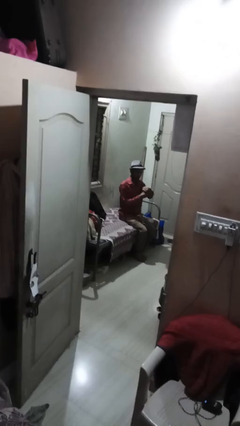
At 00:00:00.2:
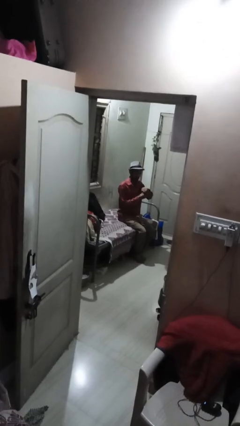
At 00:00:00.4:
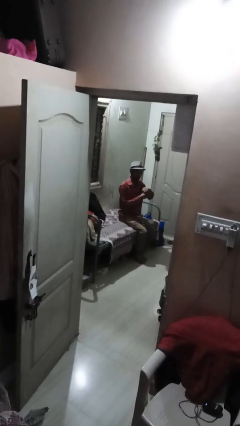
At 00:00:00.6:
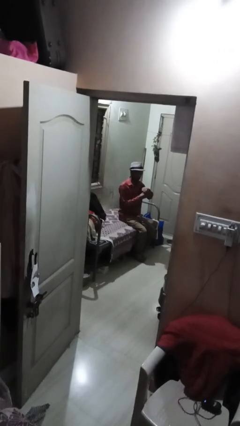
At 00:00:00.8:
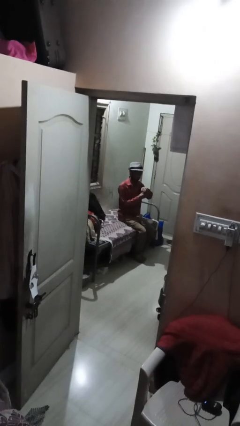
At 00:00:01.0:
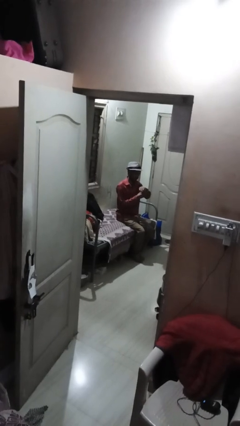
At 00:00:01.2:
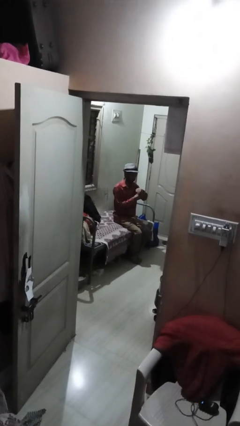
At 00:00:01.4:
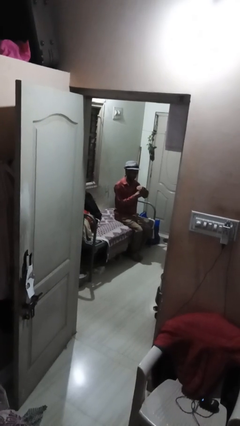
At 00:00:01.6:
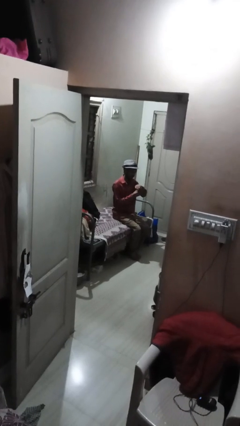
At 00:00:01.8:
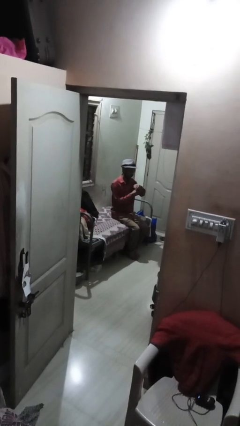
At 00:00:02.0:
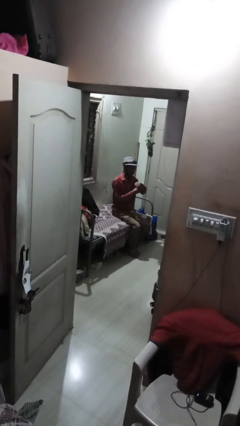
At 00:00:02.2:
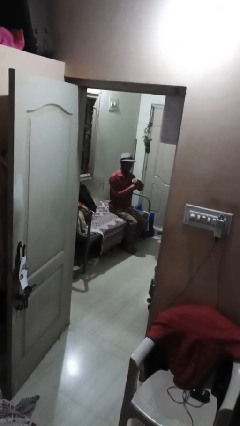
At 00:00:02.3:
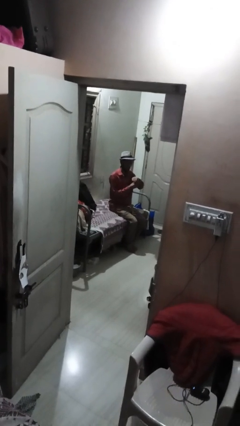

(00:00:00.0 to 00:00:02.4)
person looks at wristwatch

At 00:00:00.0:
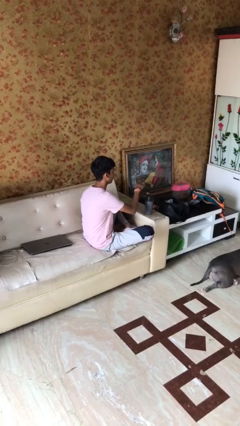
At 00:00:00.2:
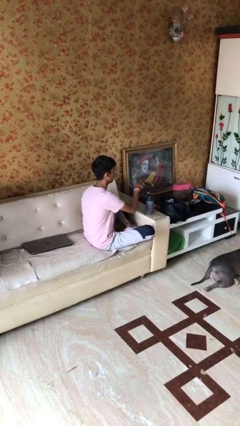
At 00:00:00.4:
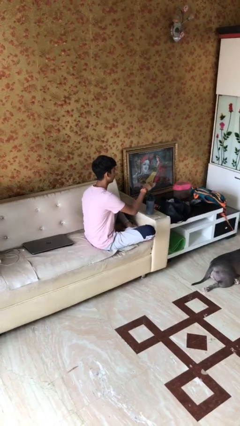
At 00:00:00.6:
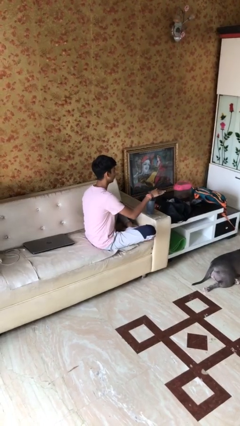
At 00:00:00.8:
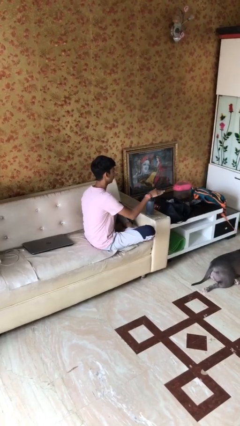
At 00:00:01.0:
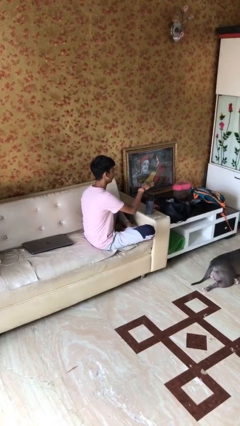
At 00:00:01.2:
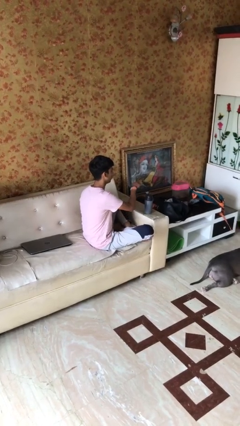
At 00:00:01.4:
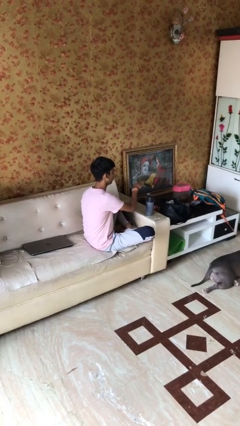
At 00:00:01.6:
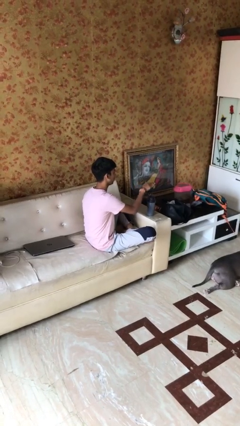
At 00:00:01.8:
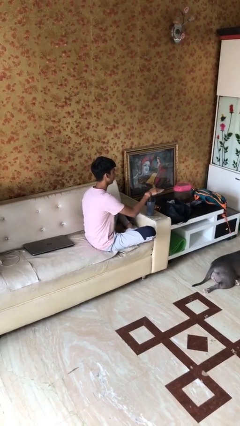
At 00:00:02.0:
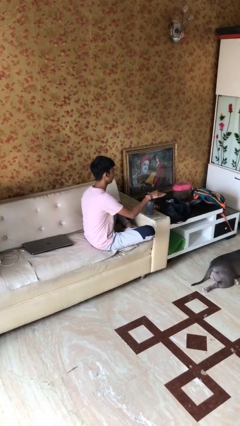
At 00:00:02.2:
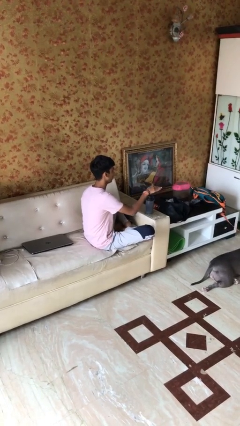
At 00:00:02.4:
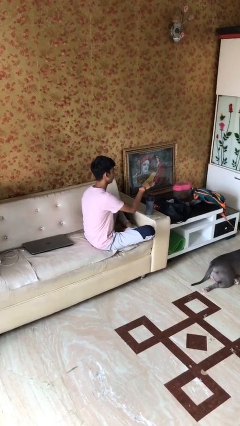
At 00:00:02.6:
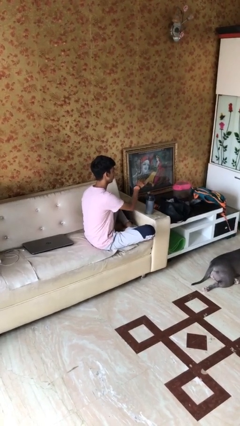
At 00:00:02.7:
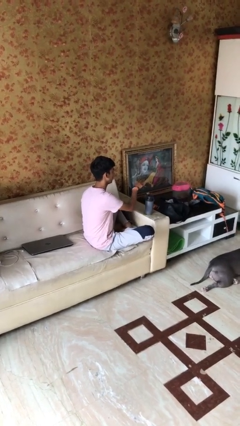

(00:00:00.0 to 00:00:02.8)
person waves hand over object

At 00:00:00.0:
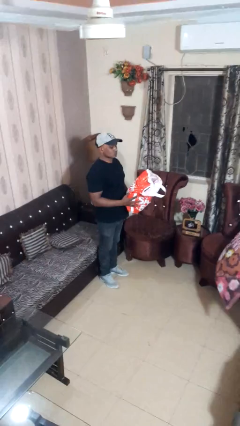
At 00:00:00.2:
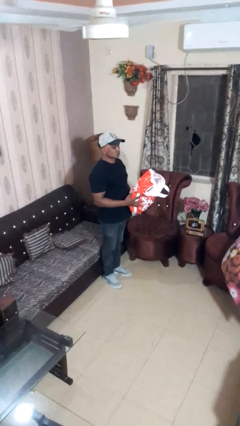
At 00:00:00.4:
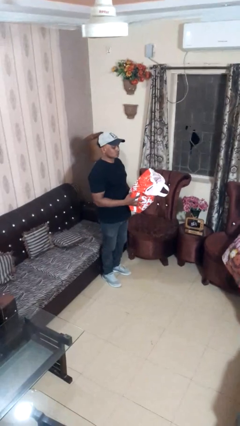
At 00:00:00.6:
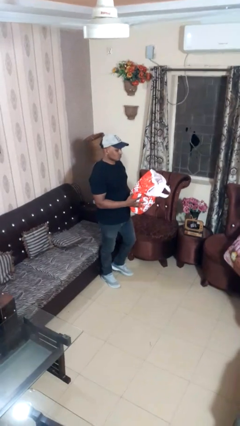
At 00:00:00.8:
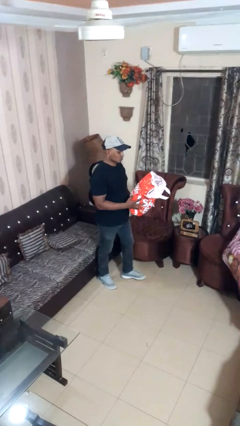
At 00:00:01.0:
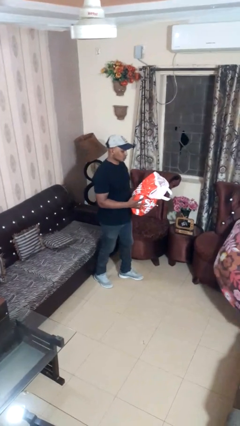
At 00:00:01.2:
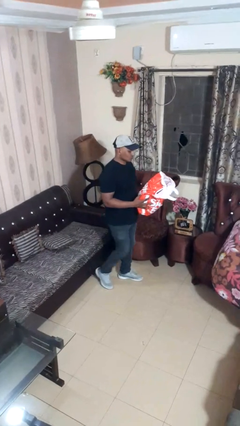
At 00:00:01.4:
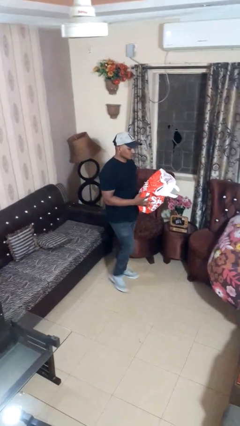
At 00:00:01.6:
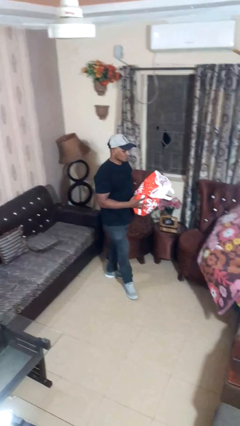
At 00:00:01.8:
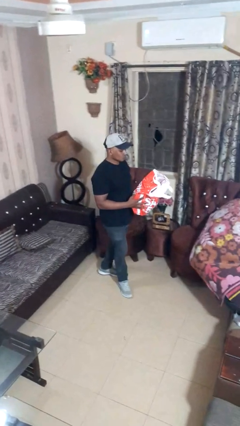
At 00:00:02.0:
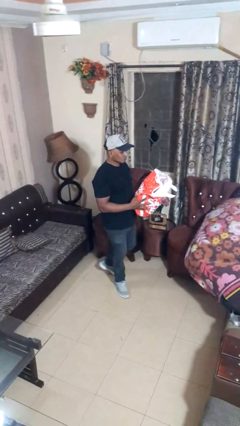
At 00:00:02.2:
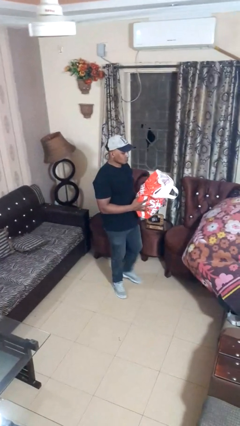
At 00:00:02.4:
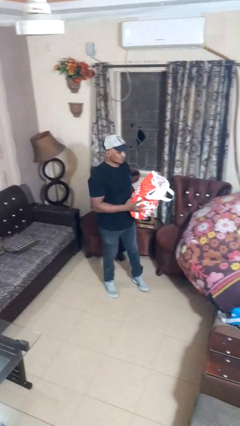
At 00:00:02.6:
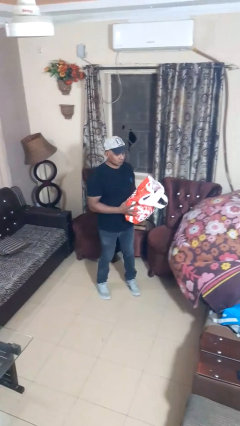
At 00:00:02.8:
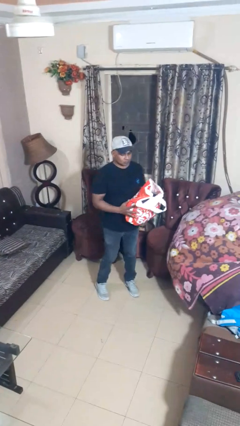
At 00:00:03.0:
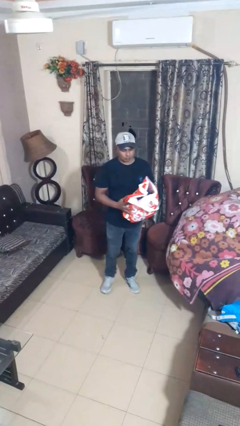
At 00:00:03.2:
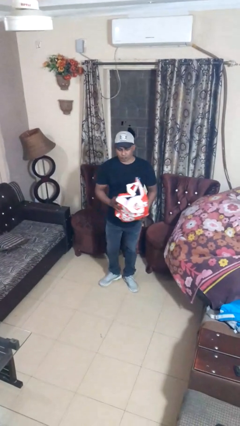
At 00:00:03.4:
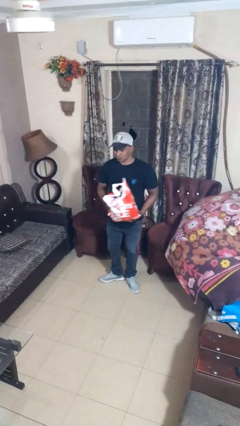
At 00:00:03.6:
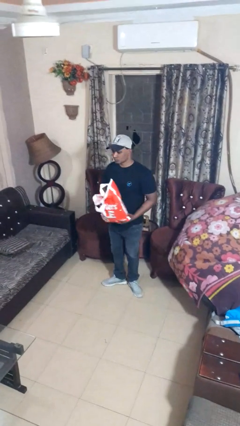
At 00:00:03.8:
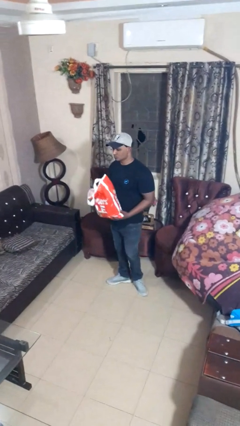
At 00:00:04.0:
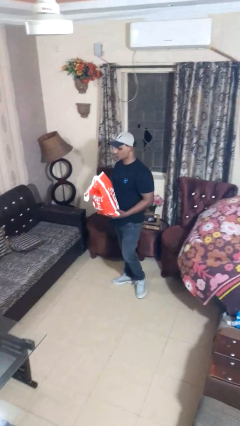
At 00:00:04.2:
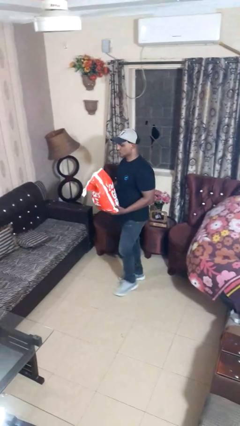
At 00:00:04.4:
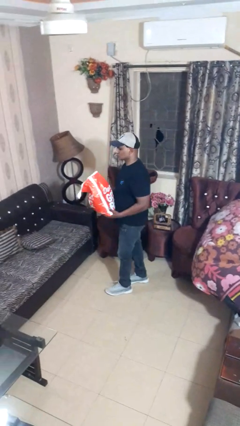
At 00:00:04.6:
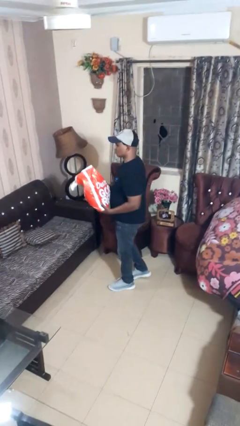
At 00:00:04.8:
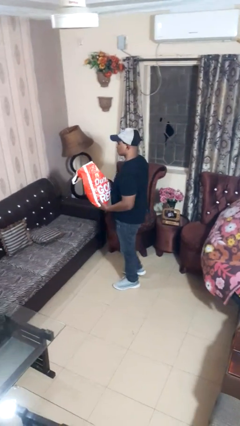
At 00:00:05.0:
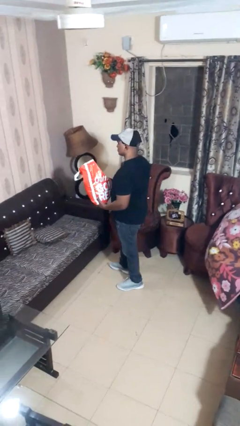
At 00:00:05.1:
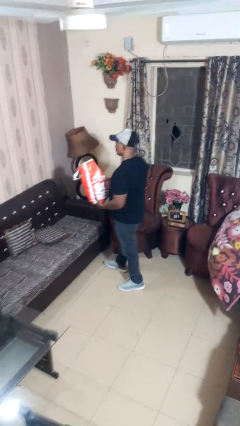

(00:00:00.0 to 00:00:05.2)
person carries groceries

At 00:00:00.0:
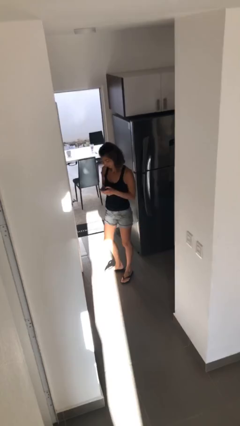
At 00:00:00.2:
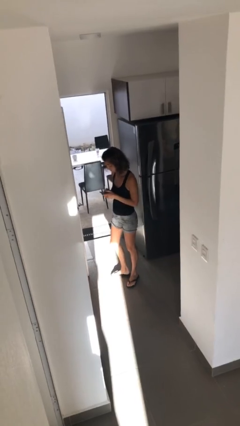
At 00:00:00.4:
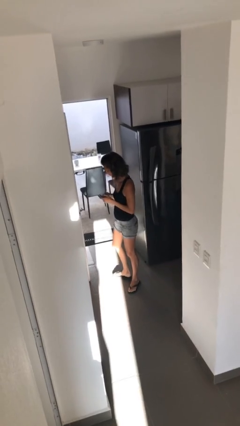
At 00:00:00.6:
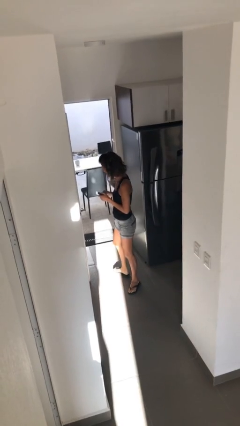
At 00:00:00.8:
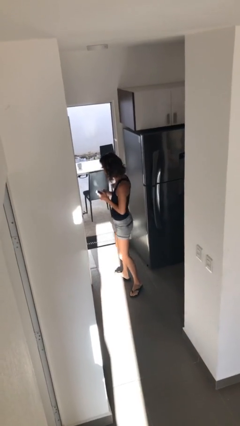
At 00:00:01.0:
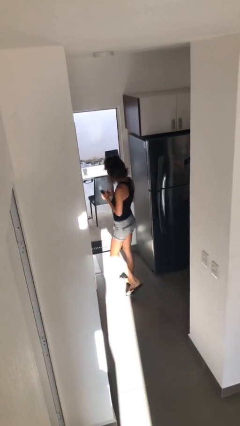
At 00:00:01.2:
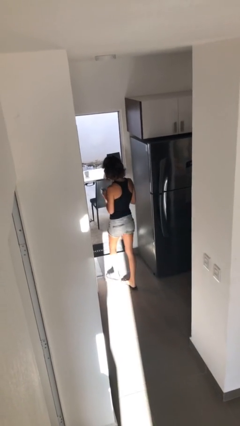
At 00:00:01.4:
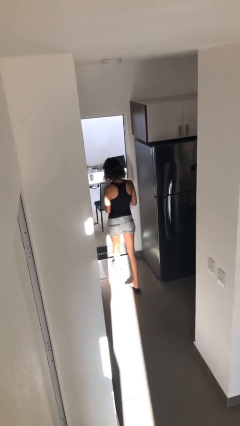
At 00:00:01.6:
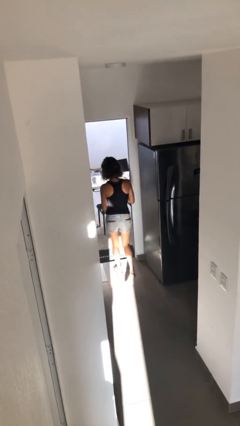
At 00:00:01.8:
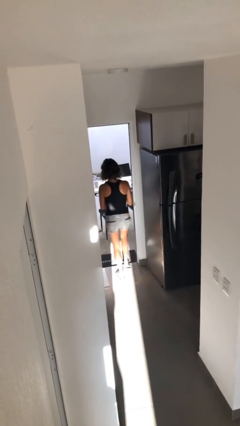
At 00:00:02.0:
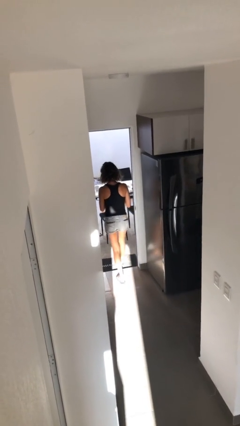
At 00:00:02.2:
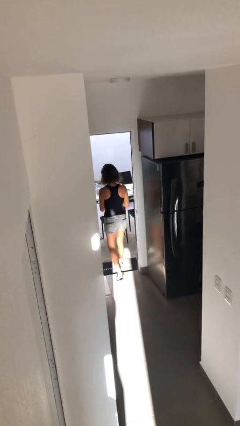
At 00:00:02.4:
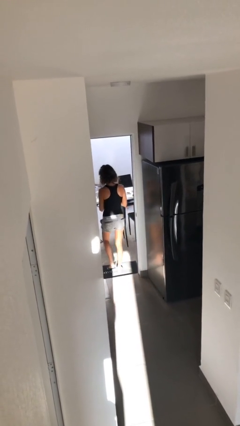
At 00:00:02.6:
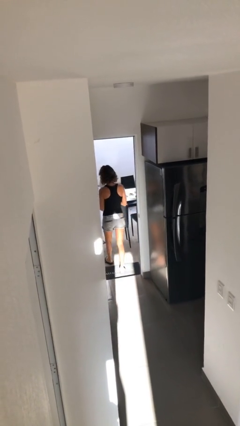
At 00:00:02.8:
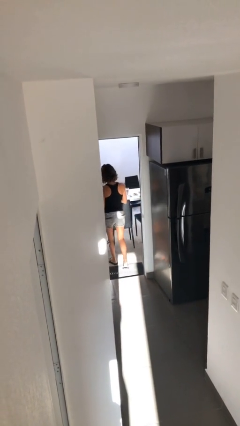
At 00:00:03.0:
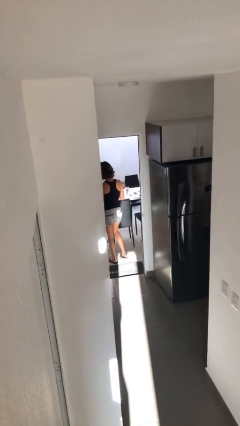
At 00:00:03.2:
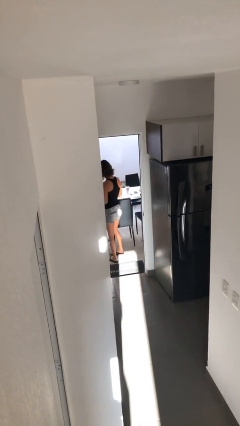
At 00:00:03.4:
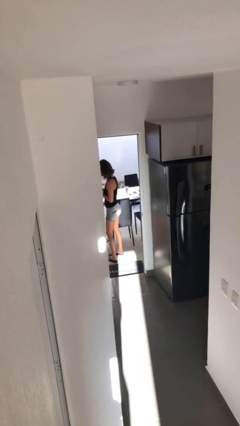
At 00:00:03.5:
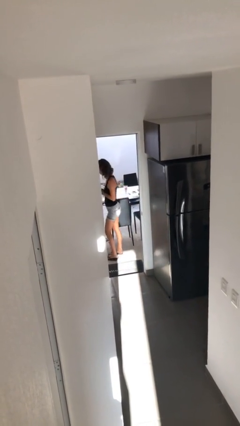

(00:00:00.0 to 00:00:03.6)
person exits scene through structure

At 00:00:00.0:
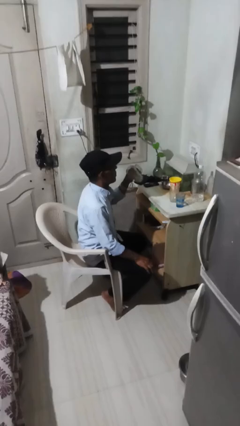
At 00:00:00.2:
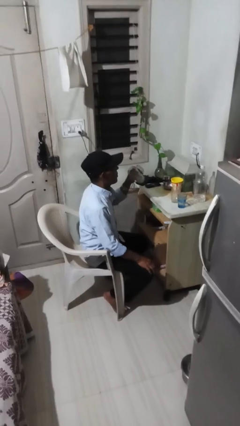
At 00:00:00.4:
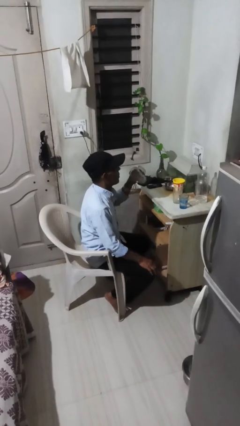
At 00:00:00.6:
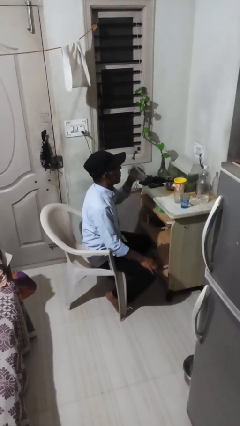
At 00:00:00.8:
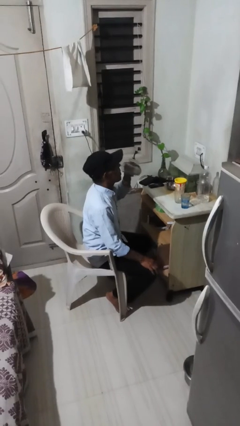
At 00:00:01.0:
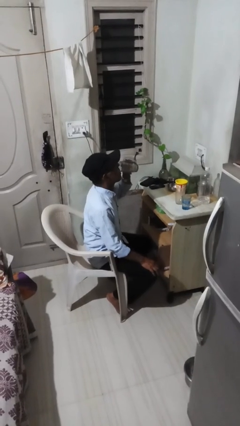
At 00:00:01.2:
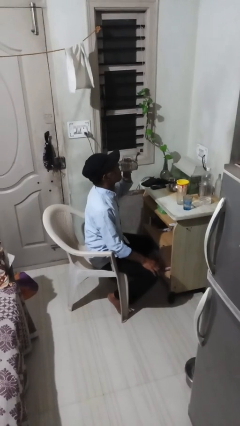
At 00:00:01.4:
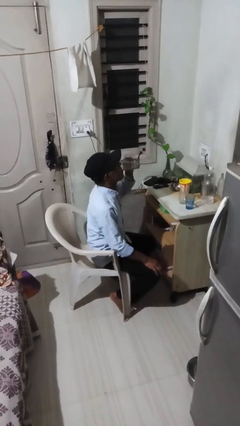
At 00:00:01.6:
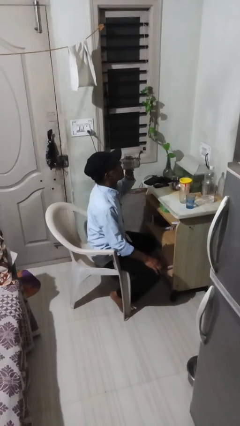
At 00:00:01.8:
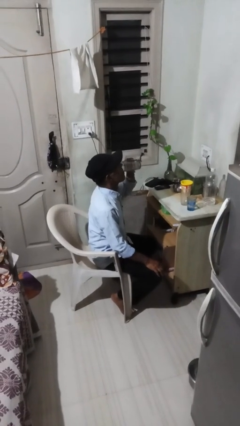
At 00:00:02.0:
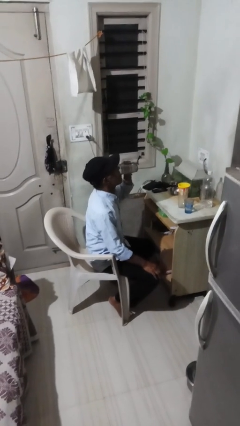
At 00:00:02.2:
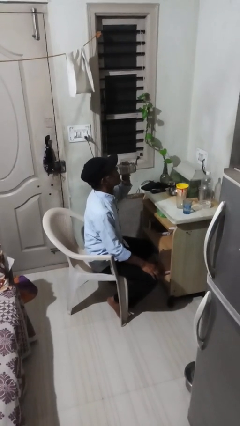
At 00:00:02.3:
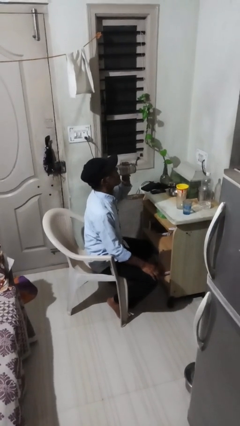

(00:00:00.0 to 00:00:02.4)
person drinks from shotglass

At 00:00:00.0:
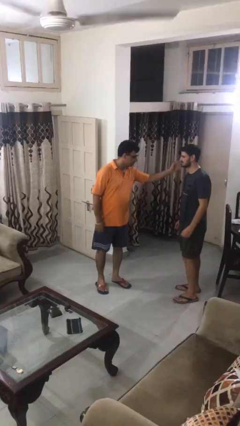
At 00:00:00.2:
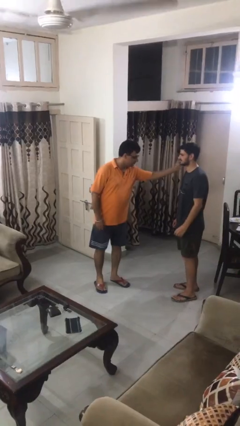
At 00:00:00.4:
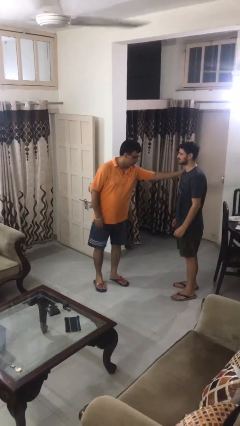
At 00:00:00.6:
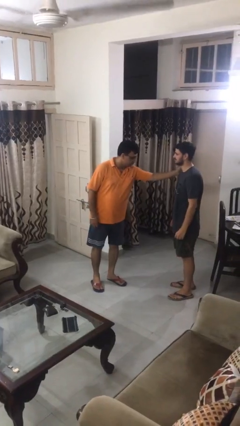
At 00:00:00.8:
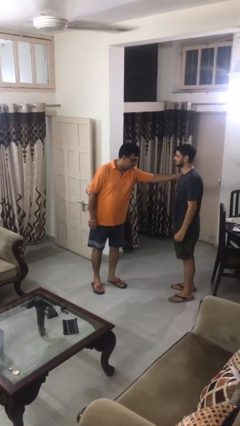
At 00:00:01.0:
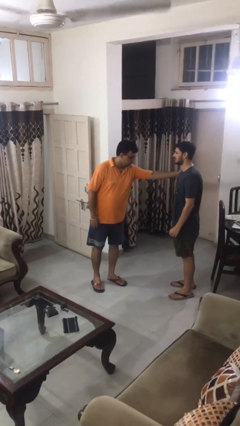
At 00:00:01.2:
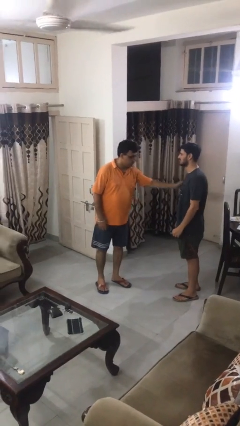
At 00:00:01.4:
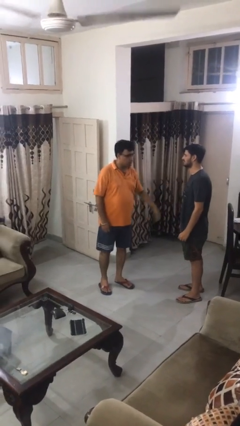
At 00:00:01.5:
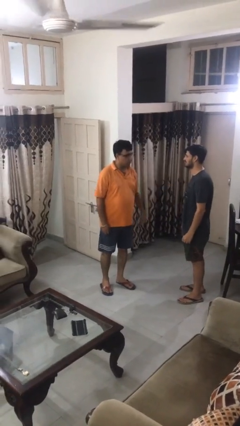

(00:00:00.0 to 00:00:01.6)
person pounds shoulders of person
